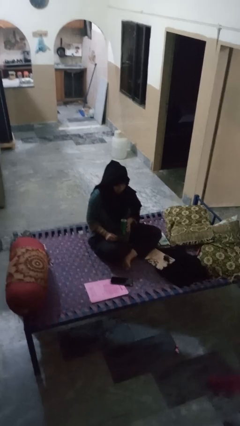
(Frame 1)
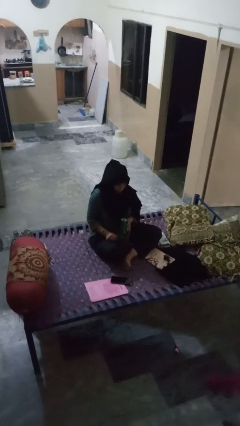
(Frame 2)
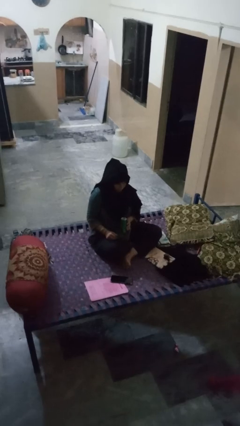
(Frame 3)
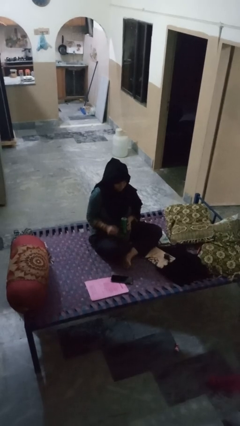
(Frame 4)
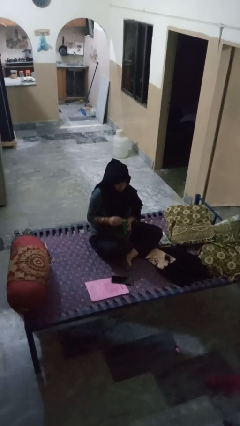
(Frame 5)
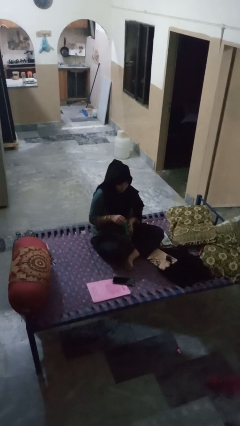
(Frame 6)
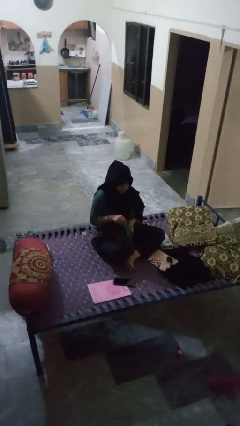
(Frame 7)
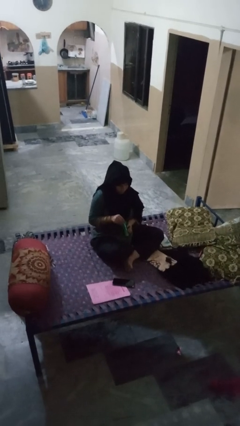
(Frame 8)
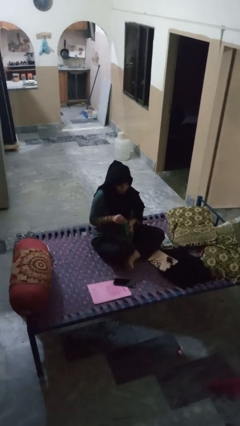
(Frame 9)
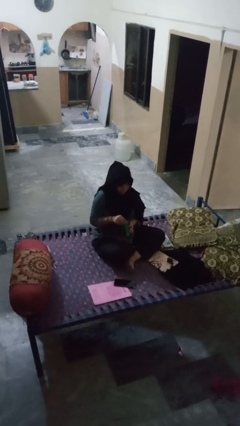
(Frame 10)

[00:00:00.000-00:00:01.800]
person opens can with can opener

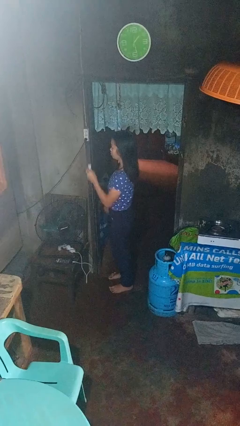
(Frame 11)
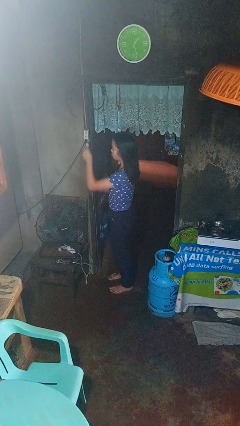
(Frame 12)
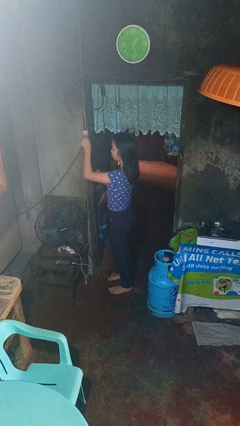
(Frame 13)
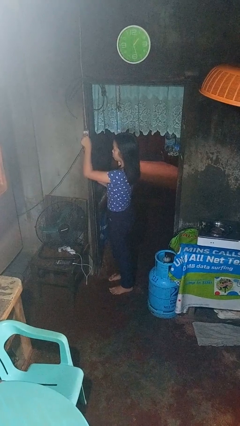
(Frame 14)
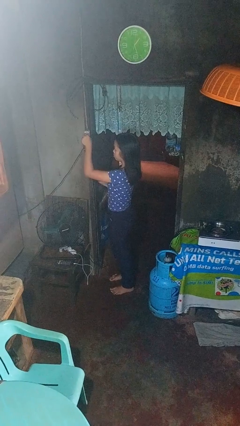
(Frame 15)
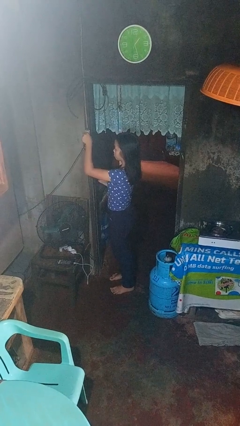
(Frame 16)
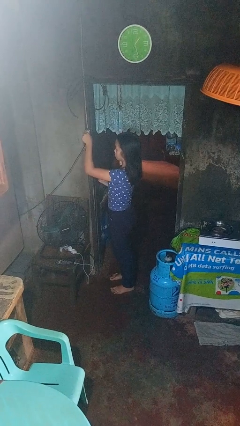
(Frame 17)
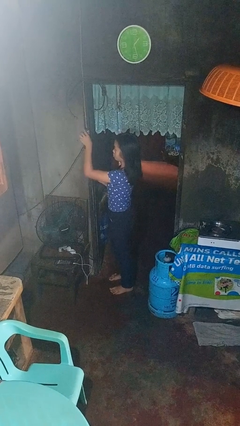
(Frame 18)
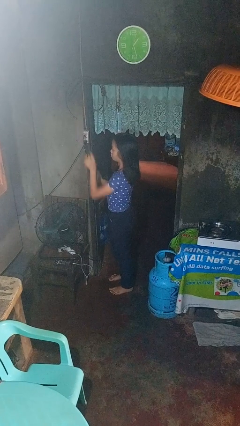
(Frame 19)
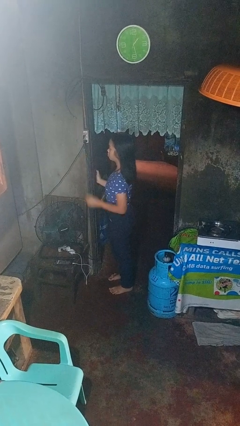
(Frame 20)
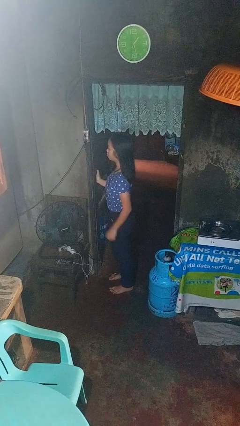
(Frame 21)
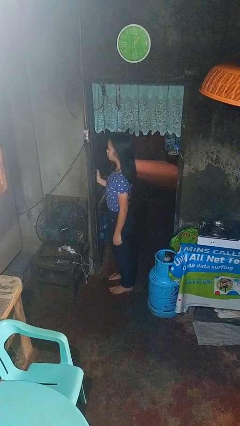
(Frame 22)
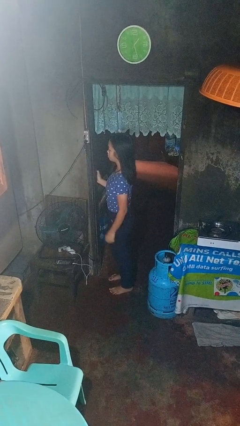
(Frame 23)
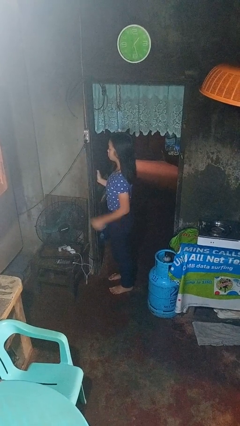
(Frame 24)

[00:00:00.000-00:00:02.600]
person plugs into electrical socket

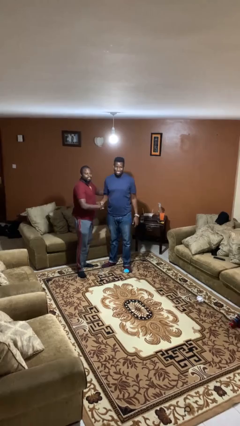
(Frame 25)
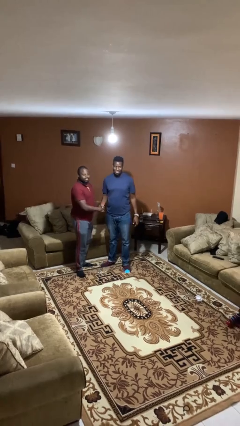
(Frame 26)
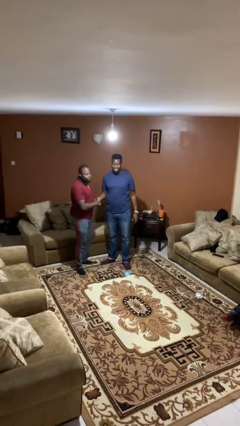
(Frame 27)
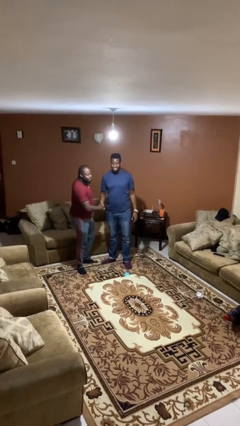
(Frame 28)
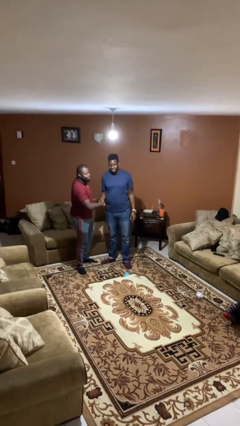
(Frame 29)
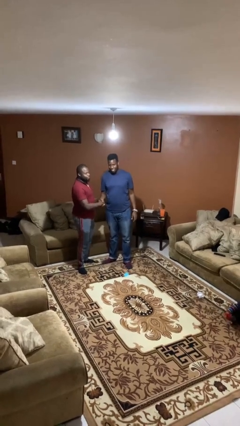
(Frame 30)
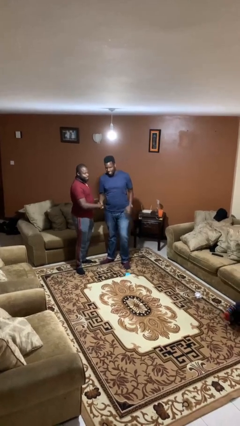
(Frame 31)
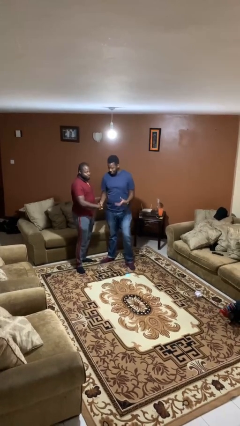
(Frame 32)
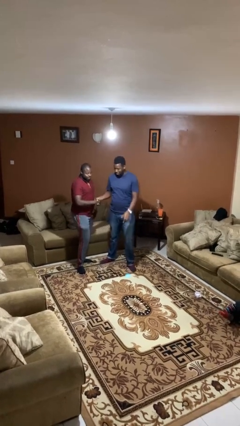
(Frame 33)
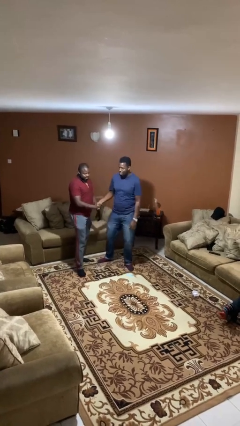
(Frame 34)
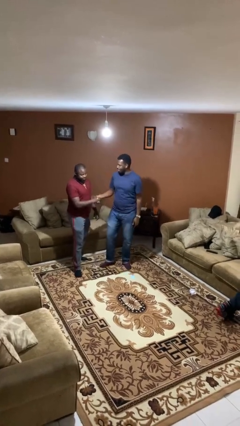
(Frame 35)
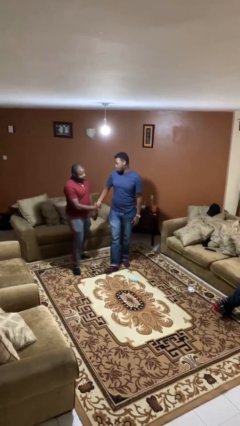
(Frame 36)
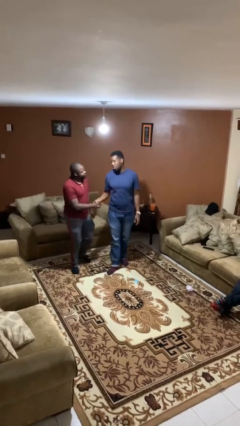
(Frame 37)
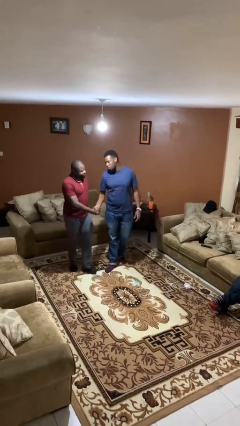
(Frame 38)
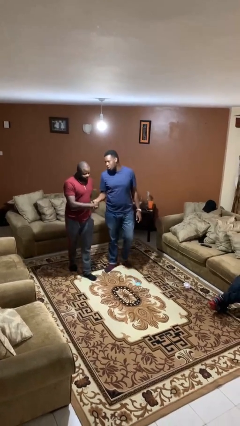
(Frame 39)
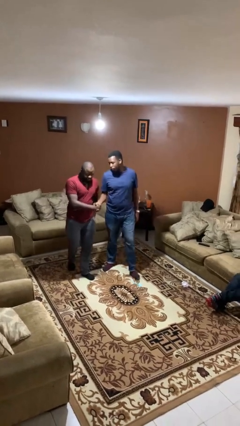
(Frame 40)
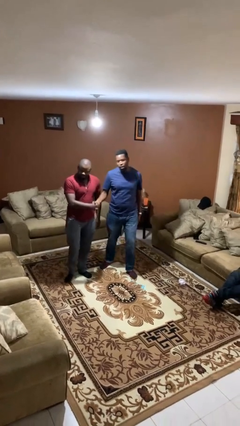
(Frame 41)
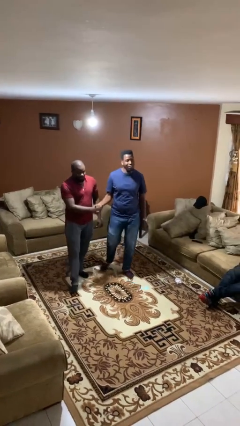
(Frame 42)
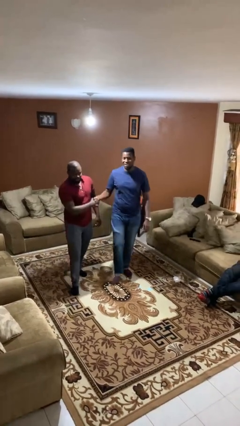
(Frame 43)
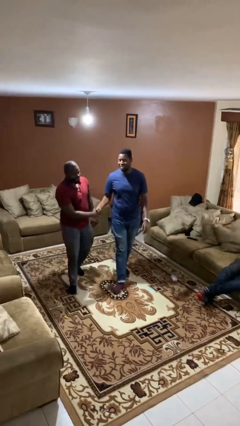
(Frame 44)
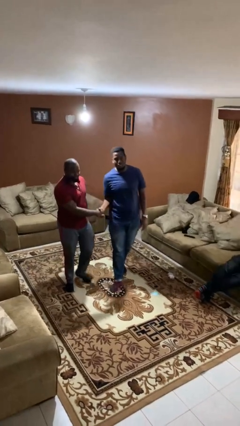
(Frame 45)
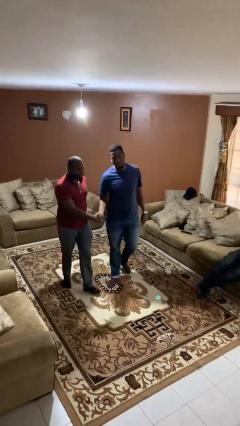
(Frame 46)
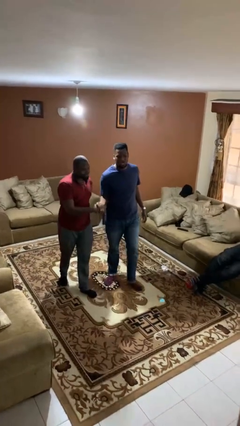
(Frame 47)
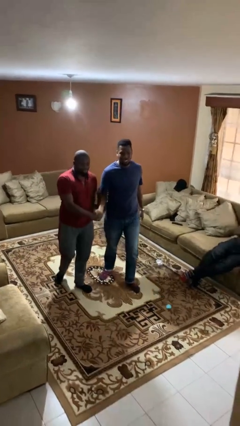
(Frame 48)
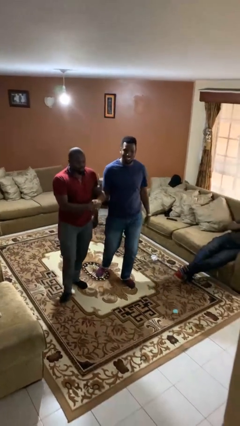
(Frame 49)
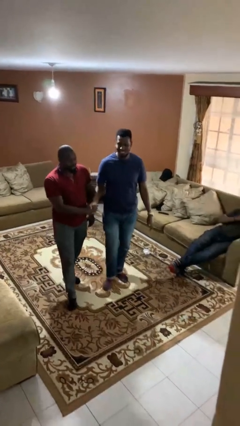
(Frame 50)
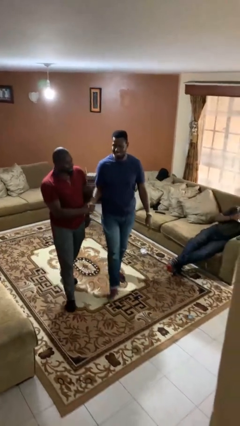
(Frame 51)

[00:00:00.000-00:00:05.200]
person holds hand

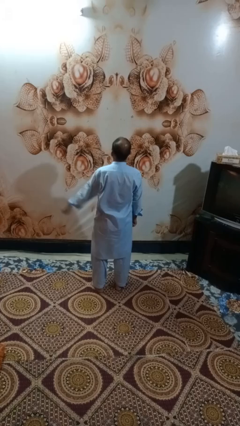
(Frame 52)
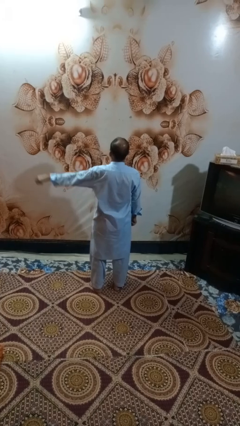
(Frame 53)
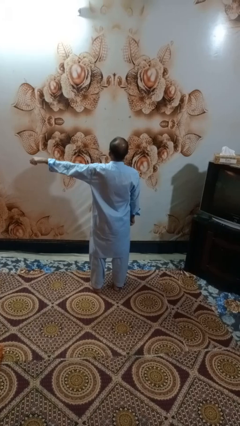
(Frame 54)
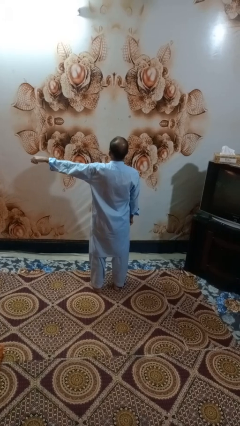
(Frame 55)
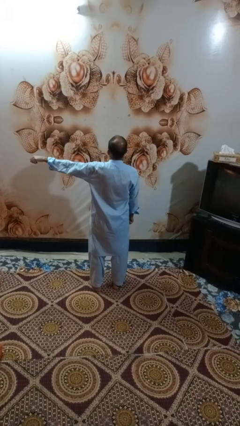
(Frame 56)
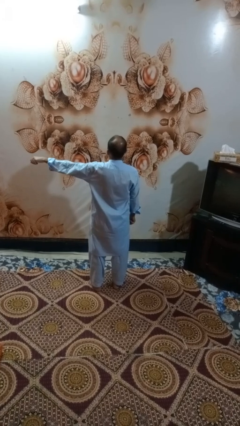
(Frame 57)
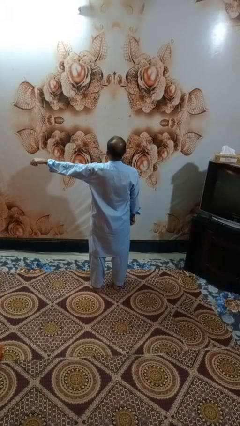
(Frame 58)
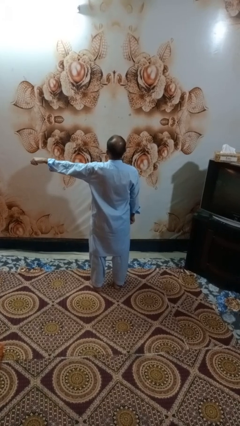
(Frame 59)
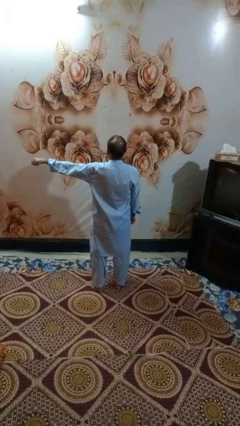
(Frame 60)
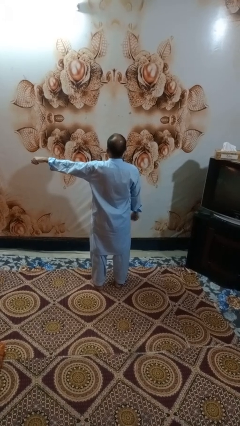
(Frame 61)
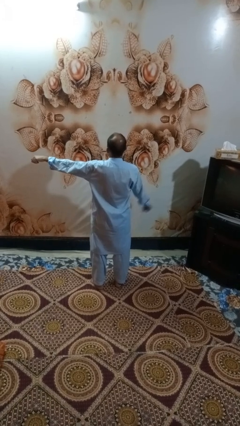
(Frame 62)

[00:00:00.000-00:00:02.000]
person gestures swipe left

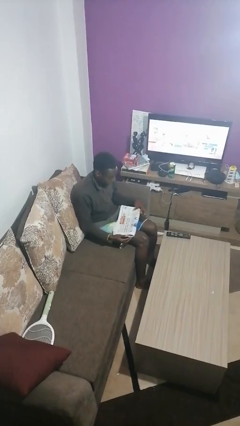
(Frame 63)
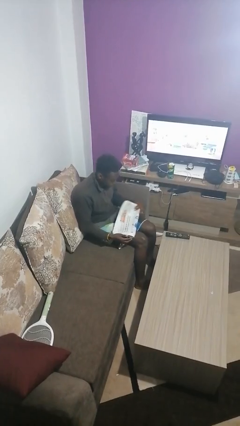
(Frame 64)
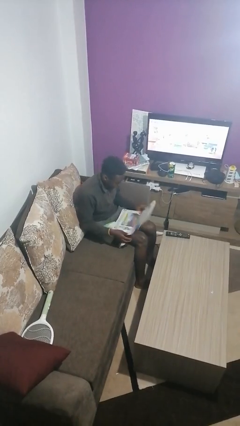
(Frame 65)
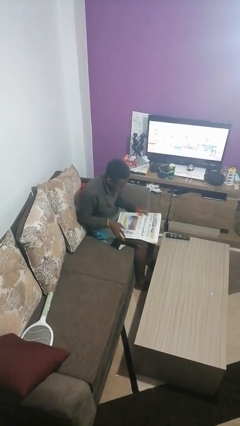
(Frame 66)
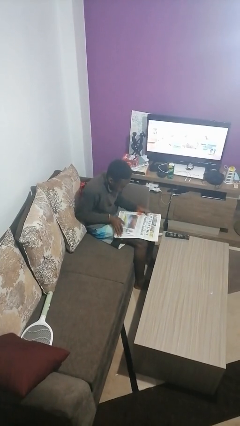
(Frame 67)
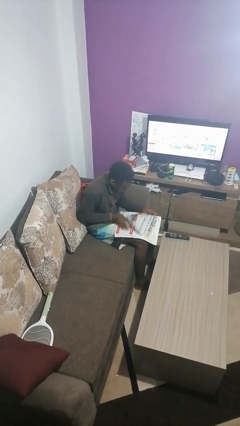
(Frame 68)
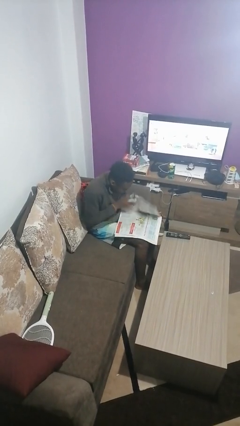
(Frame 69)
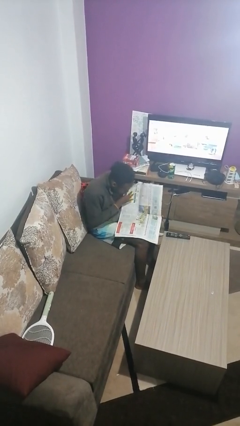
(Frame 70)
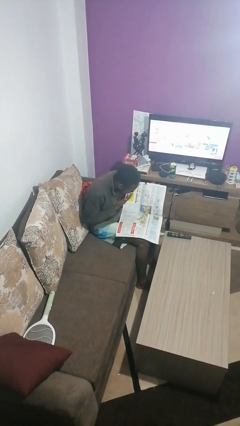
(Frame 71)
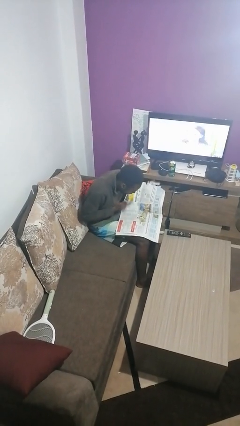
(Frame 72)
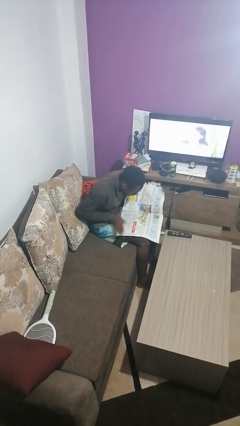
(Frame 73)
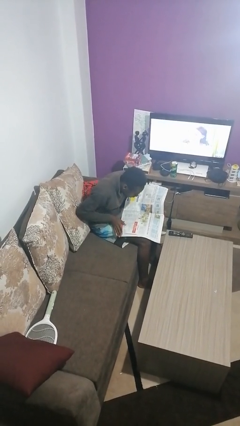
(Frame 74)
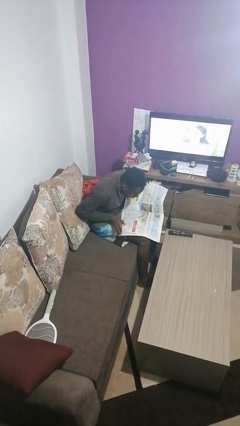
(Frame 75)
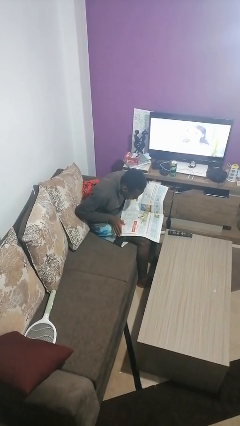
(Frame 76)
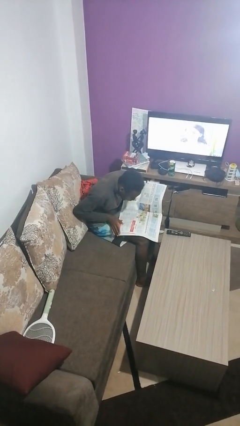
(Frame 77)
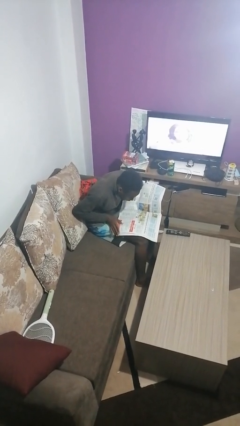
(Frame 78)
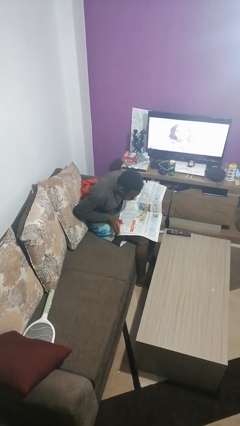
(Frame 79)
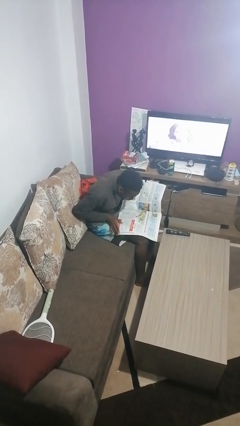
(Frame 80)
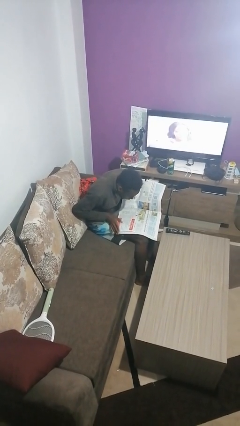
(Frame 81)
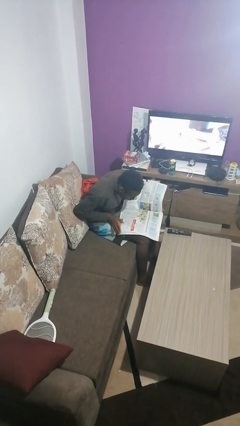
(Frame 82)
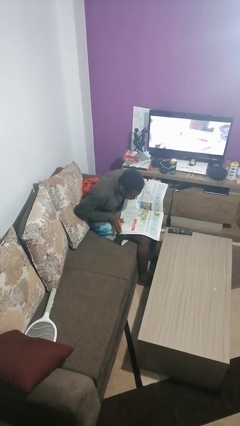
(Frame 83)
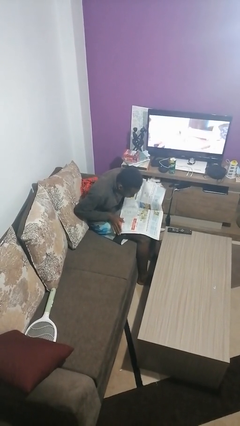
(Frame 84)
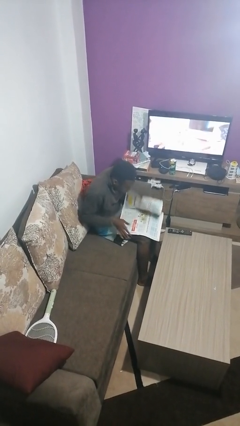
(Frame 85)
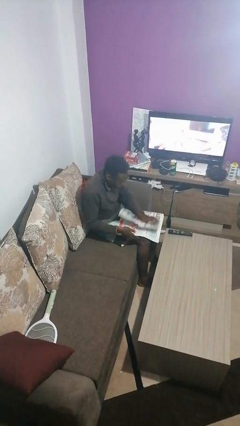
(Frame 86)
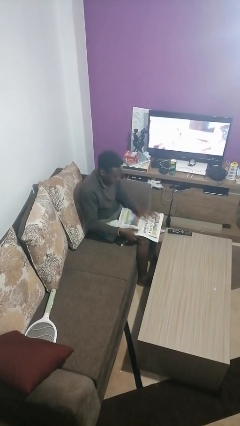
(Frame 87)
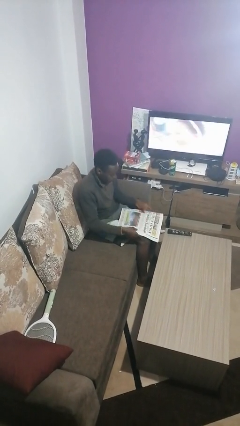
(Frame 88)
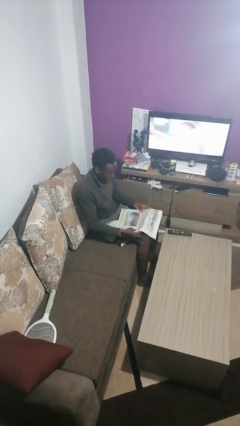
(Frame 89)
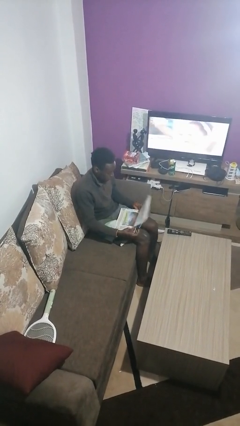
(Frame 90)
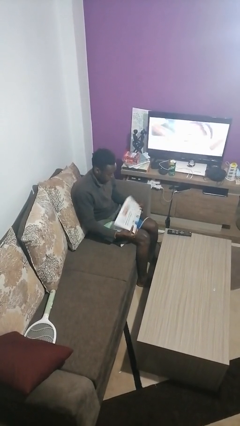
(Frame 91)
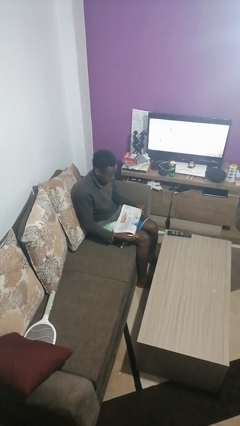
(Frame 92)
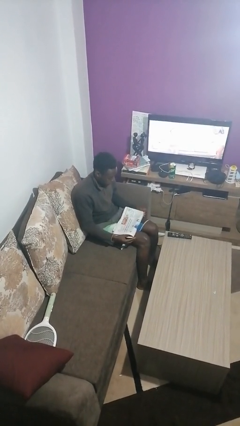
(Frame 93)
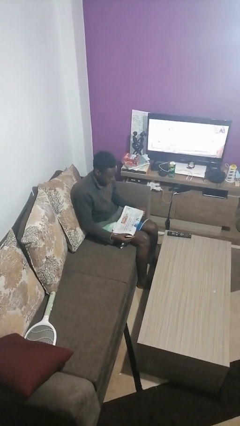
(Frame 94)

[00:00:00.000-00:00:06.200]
person reads newspaper

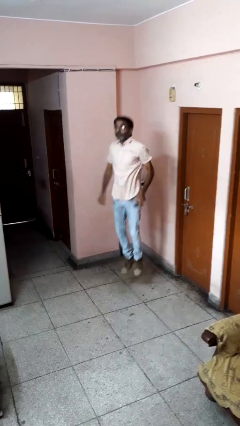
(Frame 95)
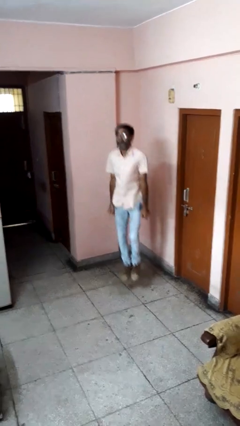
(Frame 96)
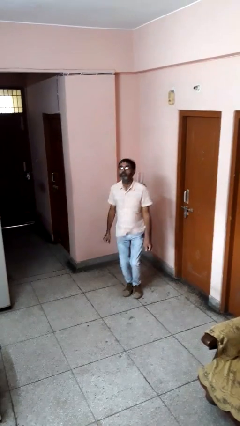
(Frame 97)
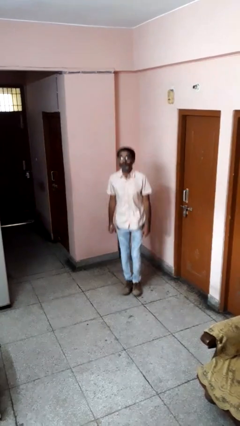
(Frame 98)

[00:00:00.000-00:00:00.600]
person jumps
